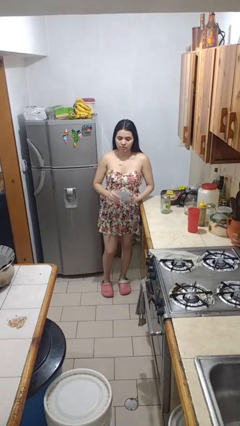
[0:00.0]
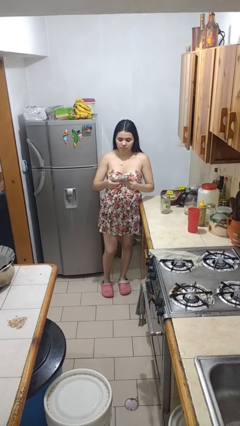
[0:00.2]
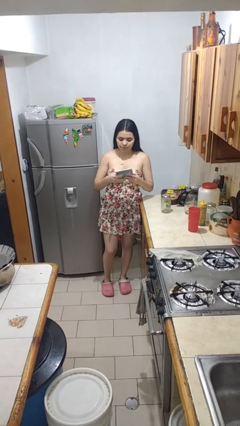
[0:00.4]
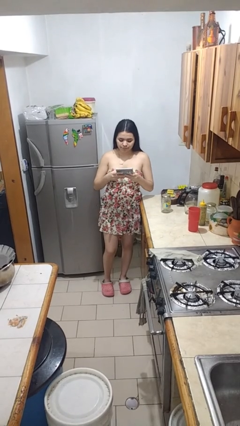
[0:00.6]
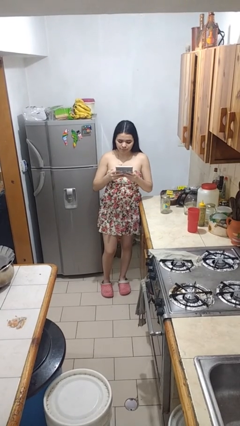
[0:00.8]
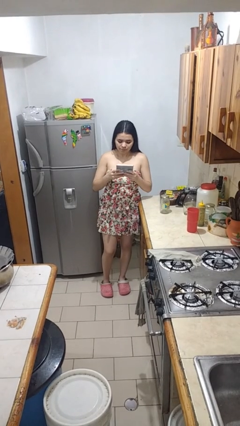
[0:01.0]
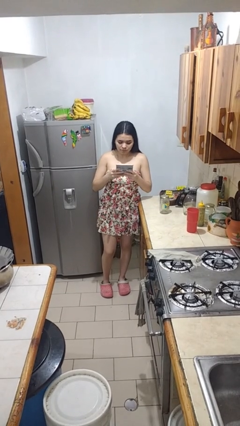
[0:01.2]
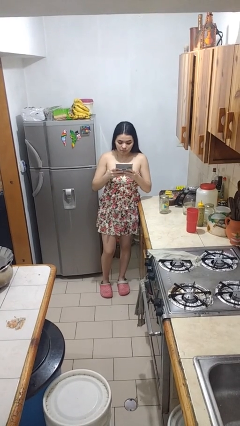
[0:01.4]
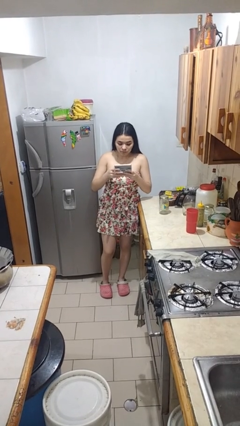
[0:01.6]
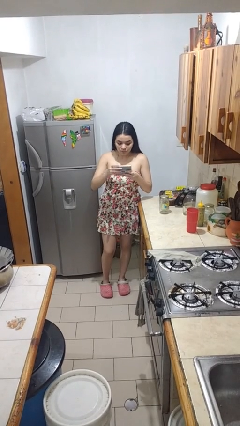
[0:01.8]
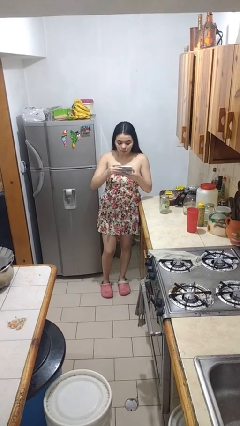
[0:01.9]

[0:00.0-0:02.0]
person interacts with handheld game

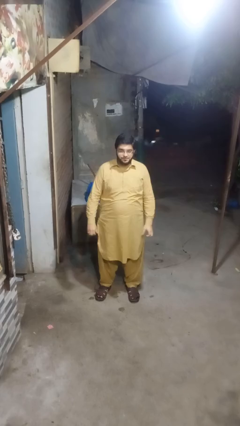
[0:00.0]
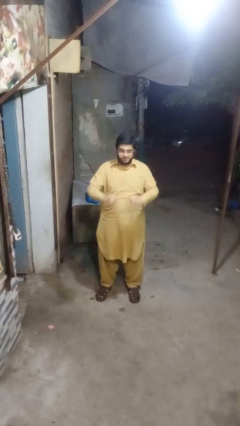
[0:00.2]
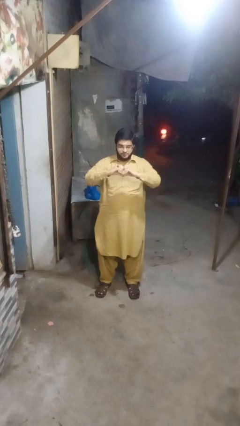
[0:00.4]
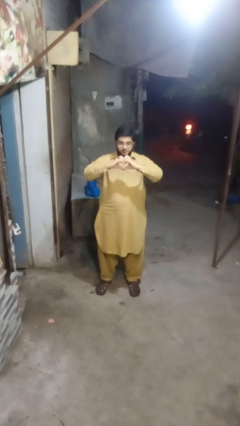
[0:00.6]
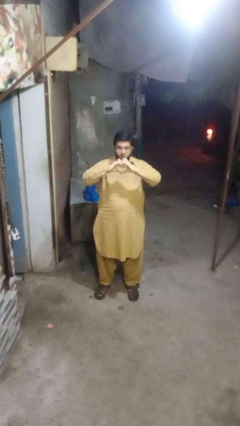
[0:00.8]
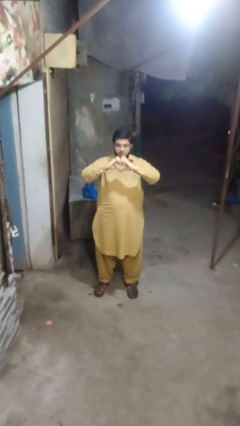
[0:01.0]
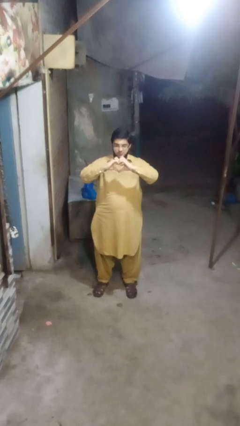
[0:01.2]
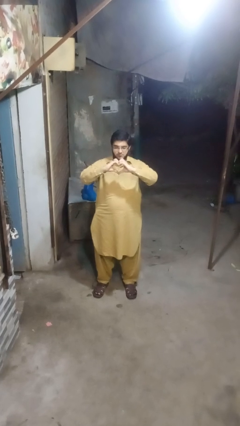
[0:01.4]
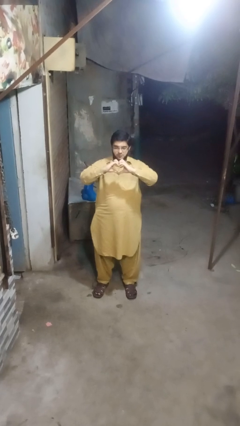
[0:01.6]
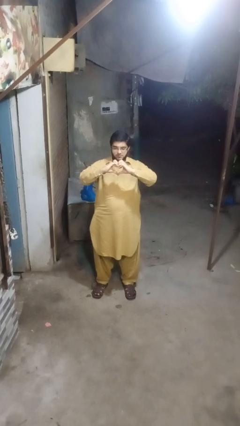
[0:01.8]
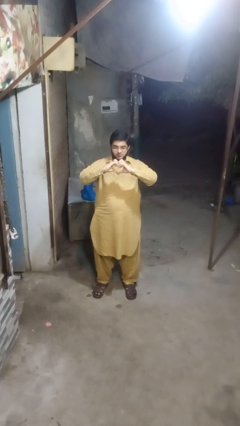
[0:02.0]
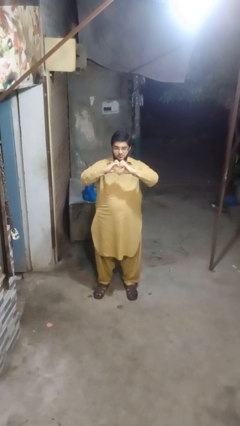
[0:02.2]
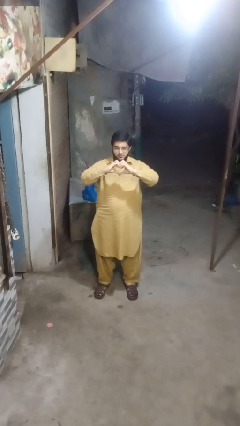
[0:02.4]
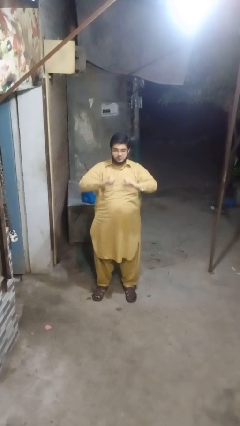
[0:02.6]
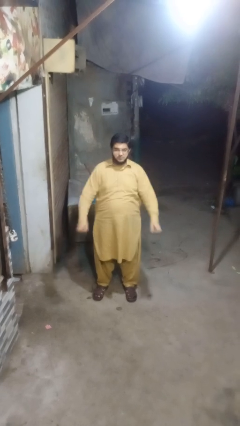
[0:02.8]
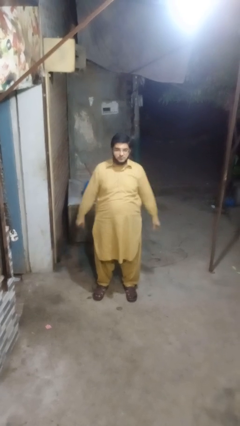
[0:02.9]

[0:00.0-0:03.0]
person gestures heart

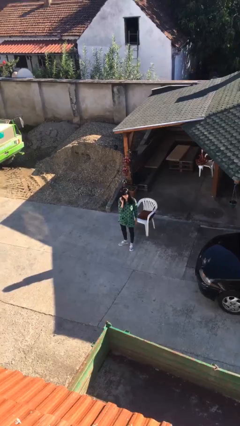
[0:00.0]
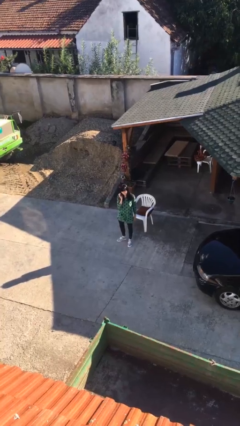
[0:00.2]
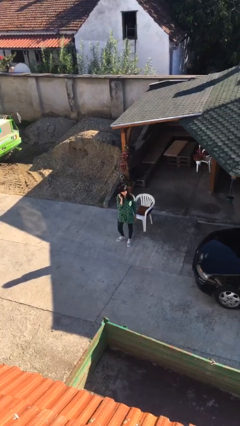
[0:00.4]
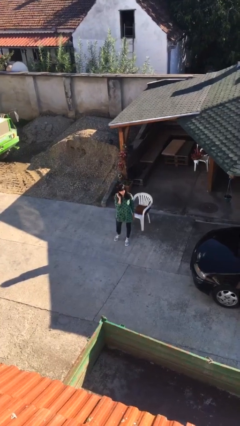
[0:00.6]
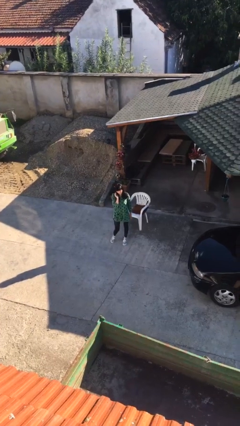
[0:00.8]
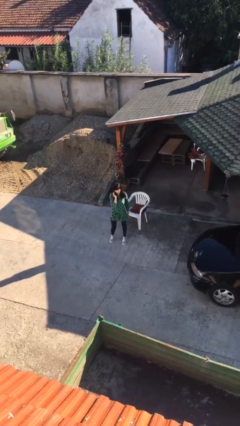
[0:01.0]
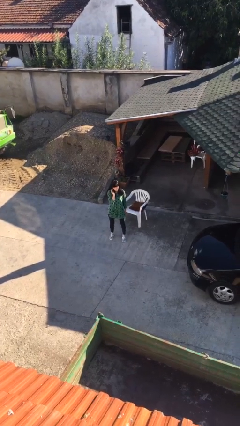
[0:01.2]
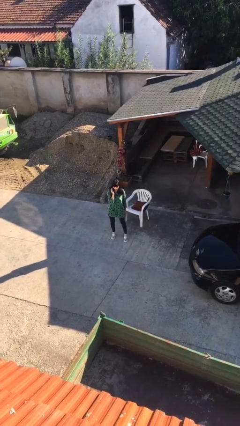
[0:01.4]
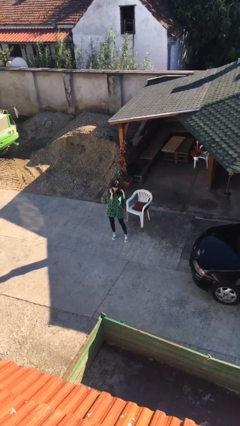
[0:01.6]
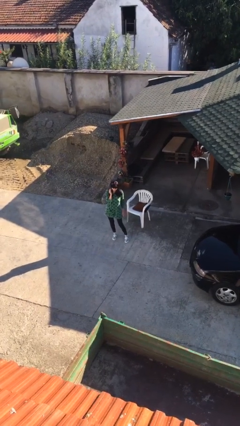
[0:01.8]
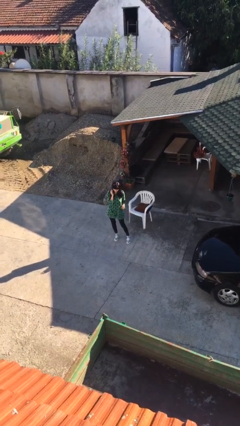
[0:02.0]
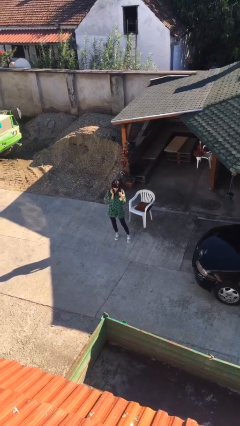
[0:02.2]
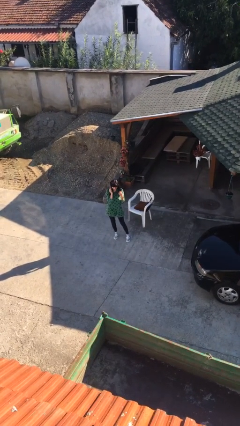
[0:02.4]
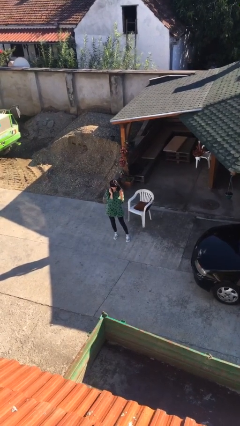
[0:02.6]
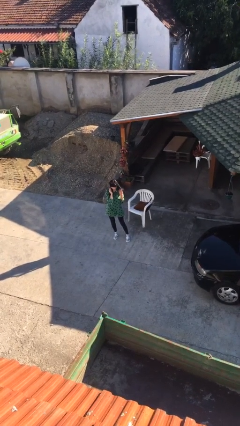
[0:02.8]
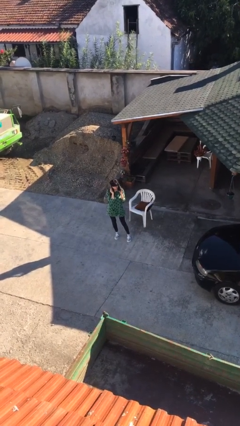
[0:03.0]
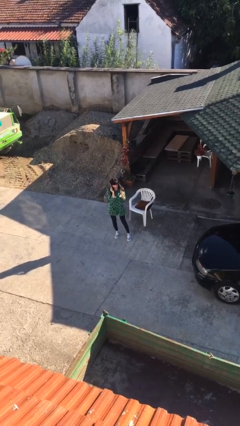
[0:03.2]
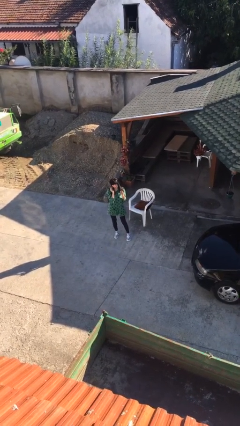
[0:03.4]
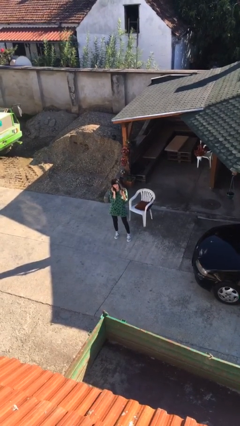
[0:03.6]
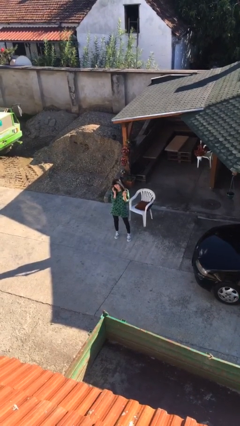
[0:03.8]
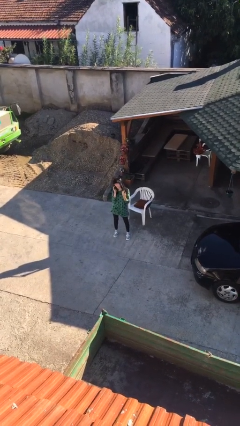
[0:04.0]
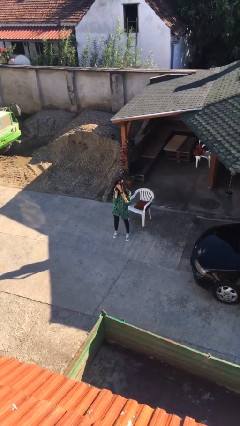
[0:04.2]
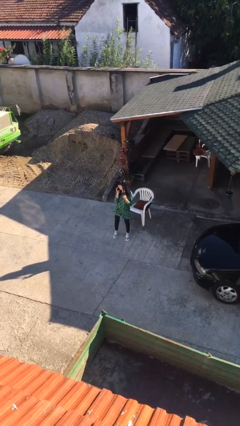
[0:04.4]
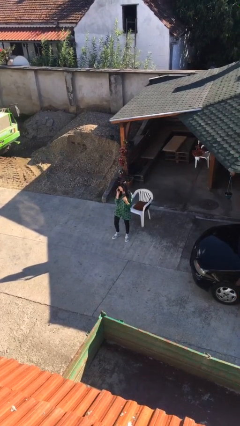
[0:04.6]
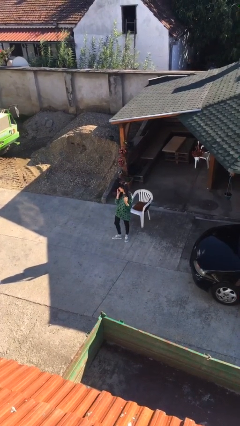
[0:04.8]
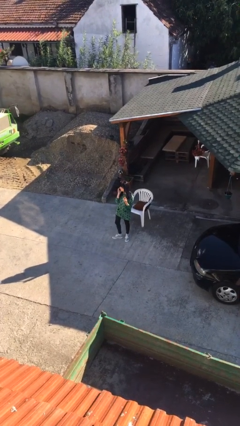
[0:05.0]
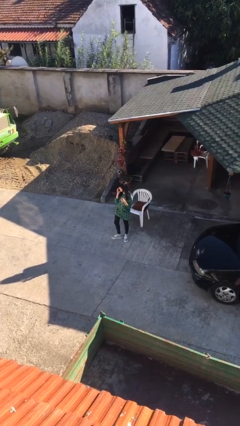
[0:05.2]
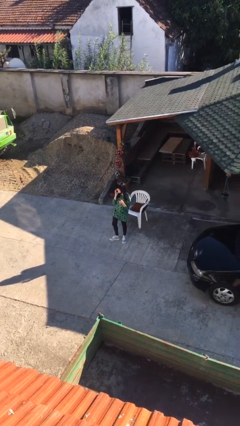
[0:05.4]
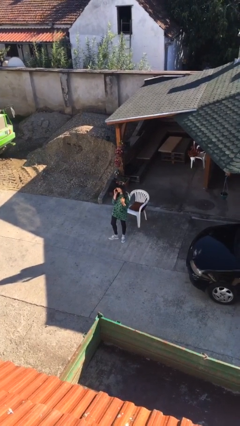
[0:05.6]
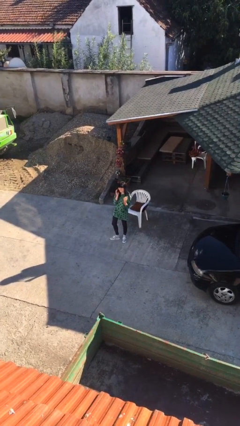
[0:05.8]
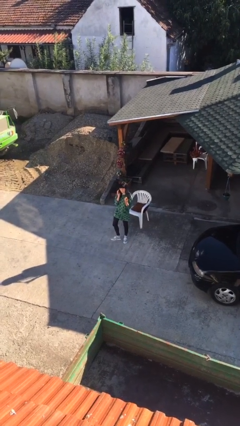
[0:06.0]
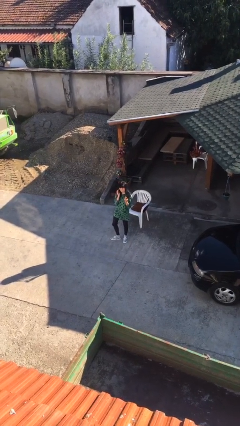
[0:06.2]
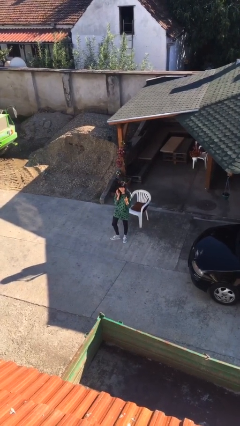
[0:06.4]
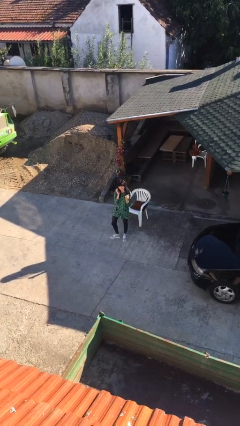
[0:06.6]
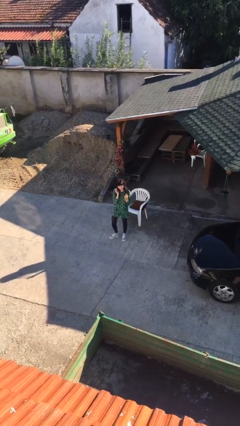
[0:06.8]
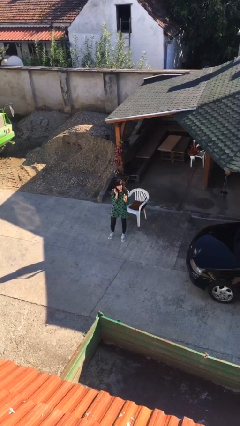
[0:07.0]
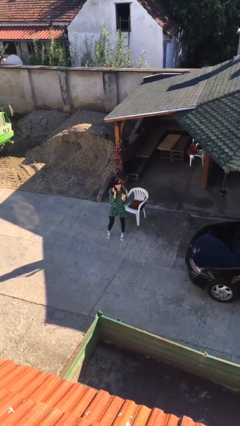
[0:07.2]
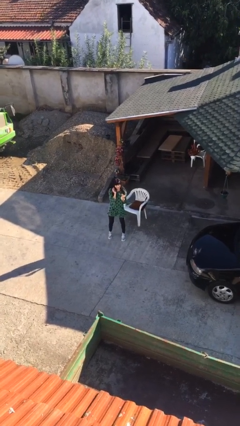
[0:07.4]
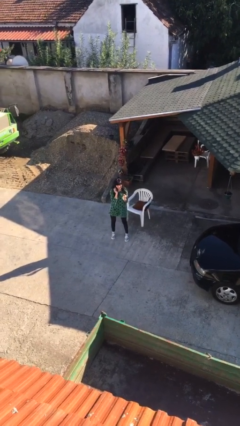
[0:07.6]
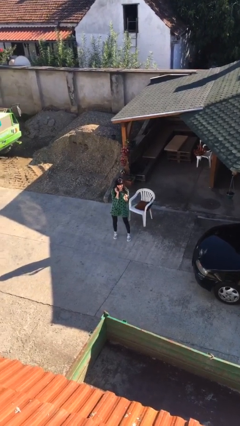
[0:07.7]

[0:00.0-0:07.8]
person talks on phone

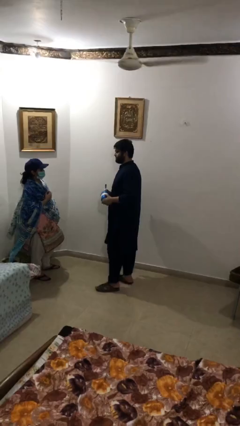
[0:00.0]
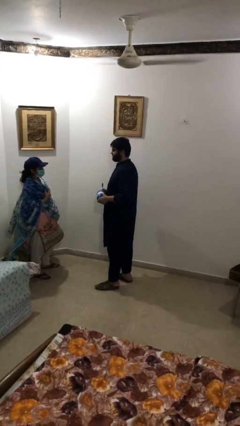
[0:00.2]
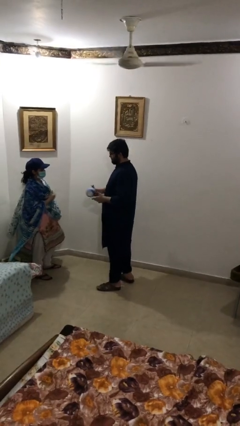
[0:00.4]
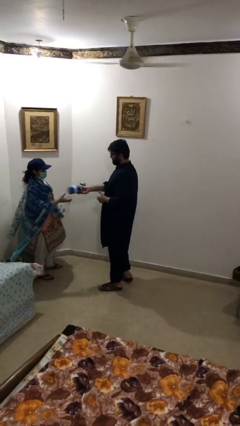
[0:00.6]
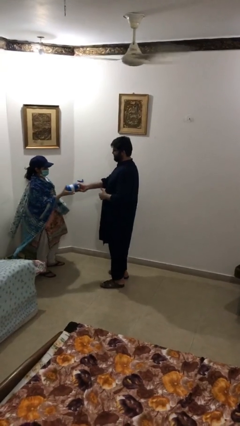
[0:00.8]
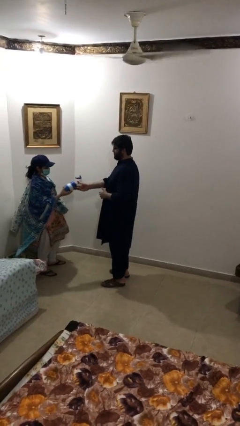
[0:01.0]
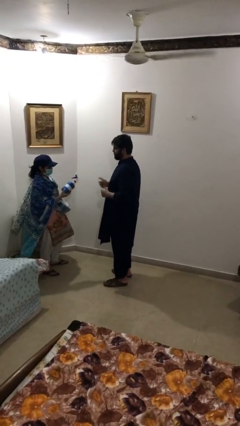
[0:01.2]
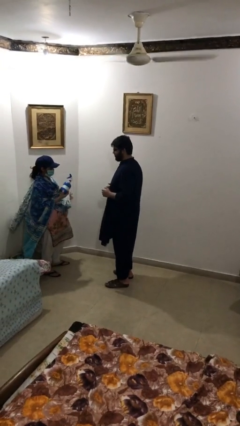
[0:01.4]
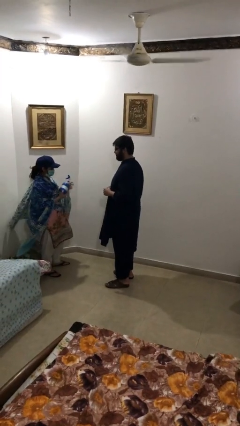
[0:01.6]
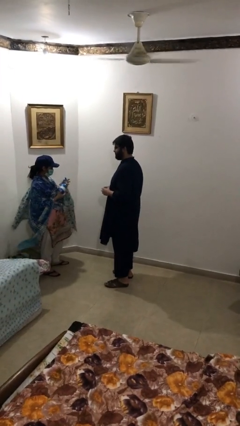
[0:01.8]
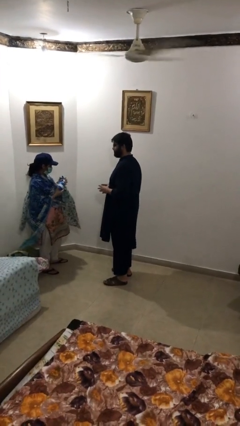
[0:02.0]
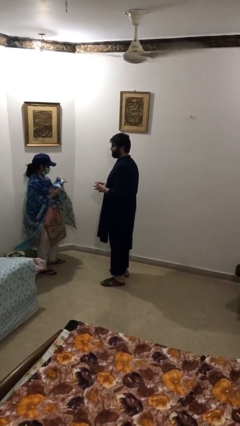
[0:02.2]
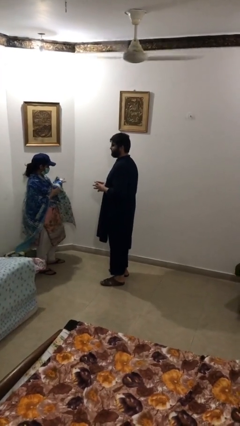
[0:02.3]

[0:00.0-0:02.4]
person transfers object to person

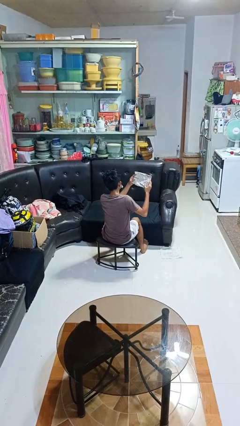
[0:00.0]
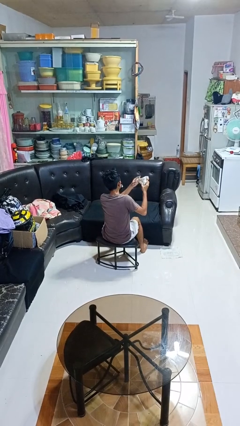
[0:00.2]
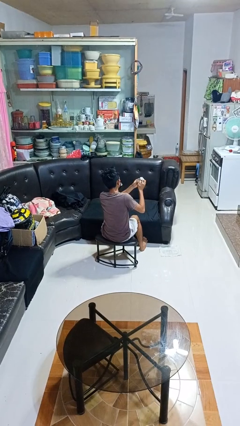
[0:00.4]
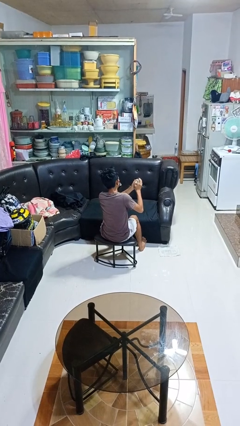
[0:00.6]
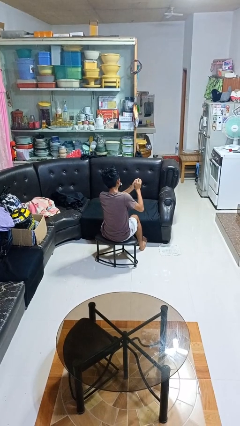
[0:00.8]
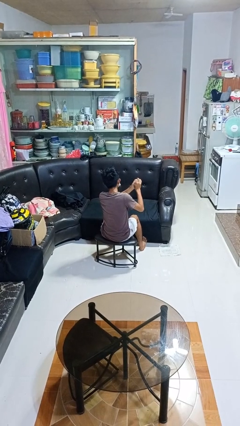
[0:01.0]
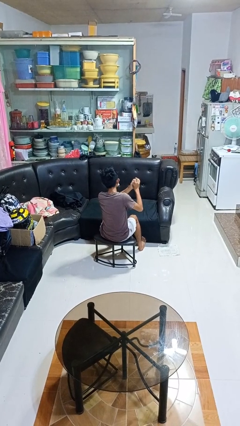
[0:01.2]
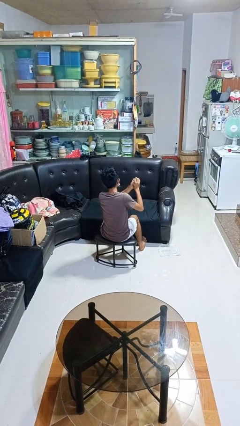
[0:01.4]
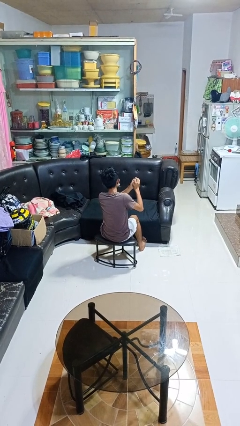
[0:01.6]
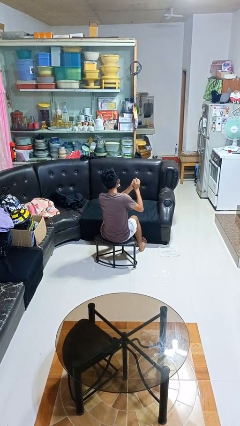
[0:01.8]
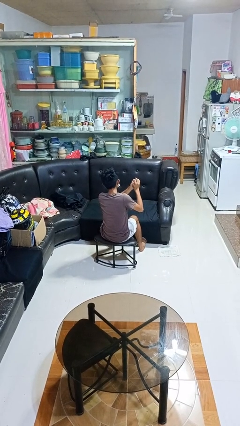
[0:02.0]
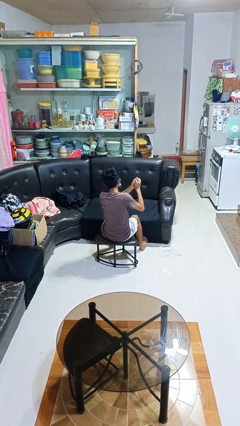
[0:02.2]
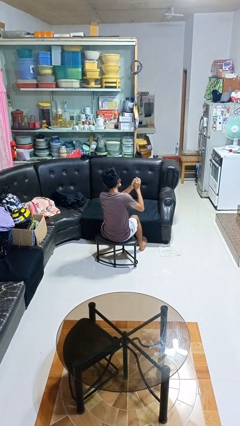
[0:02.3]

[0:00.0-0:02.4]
person crumples paper
